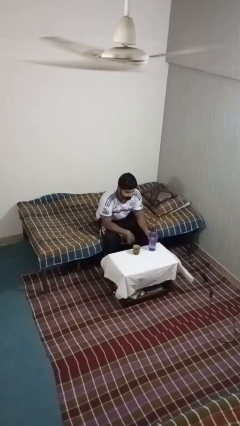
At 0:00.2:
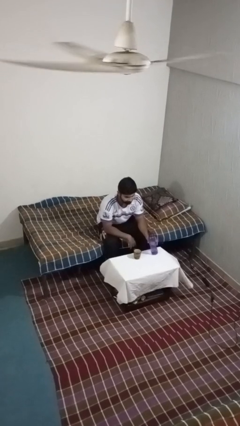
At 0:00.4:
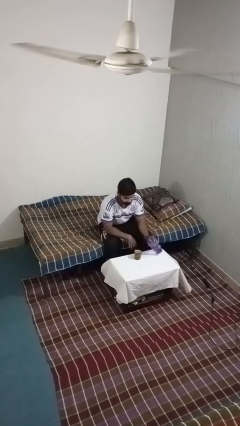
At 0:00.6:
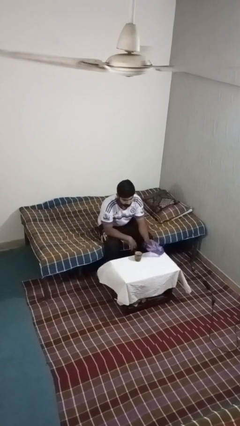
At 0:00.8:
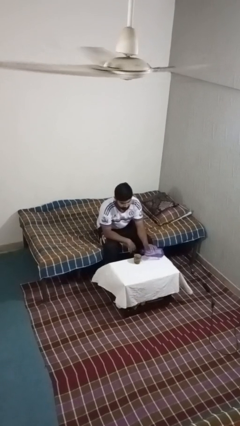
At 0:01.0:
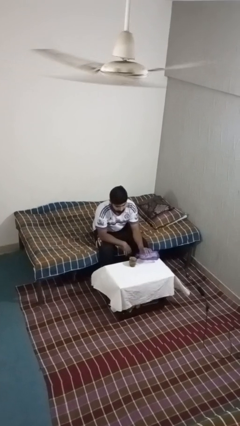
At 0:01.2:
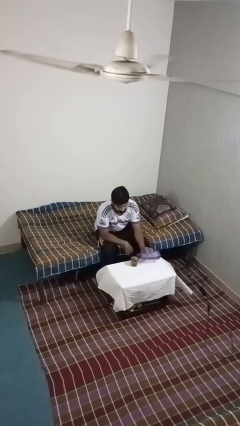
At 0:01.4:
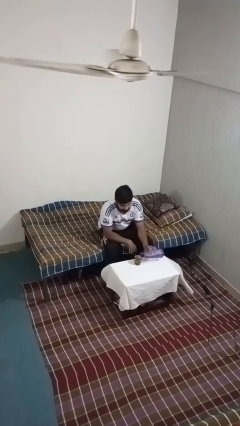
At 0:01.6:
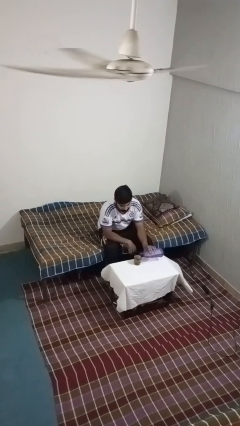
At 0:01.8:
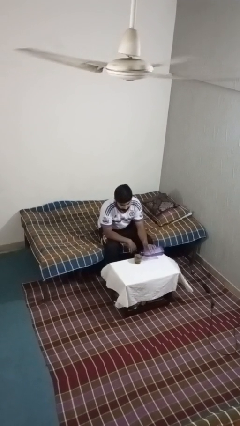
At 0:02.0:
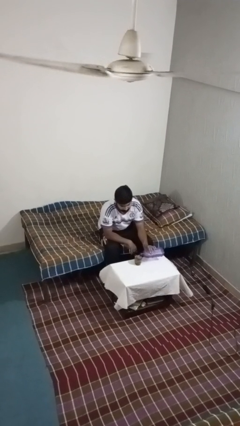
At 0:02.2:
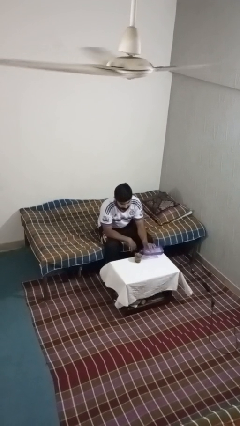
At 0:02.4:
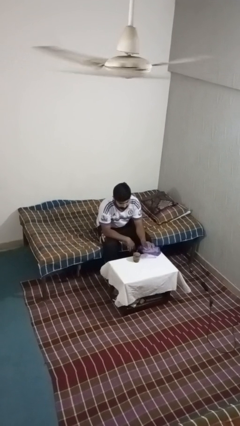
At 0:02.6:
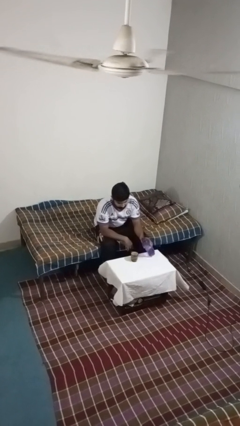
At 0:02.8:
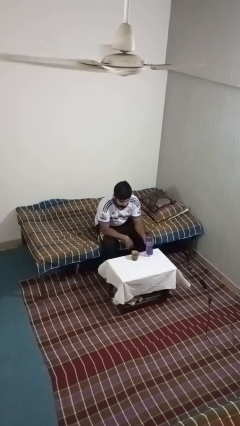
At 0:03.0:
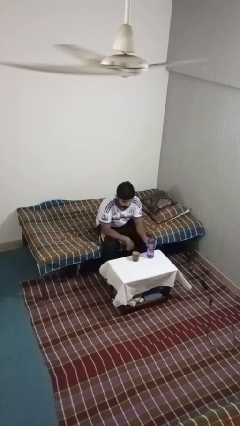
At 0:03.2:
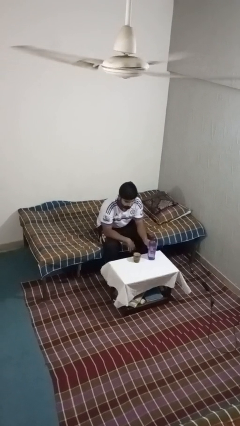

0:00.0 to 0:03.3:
person pours liquid into cup

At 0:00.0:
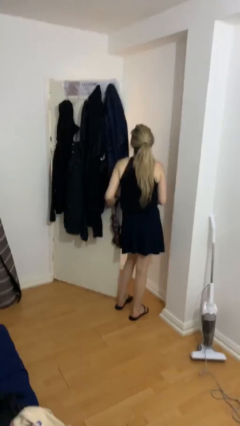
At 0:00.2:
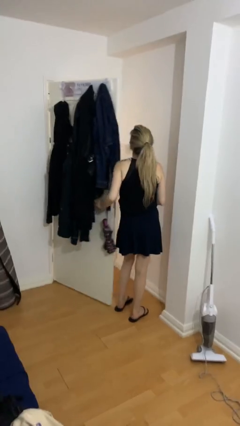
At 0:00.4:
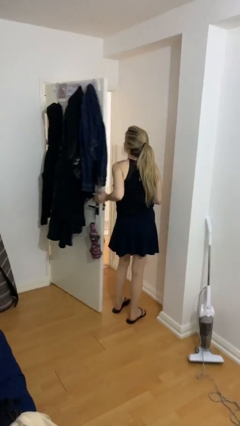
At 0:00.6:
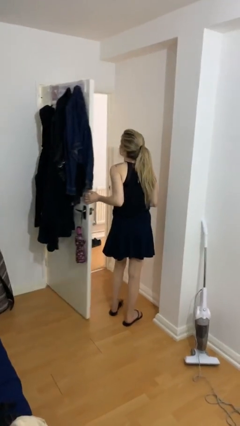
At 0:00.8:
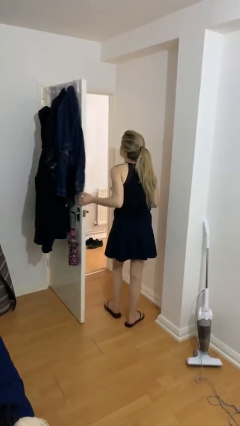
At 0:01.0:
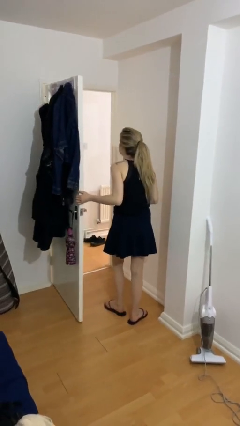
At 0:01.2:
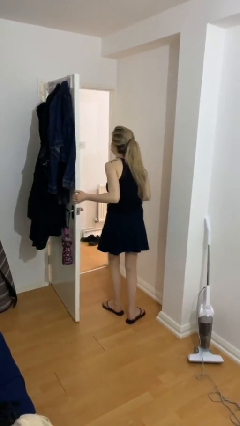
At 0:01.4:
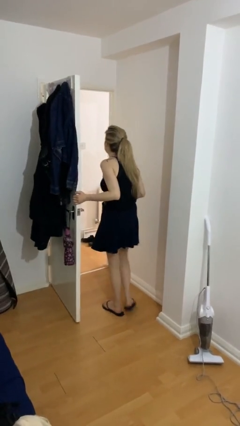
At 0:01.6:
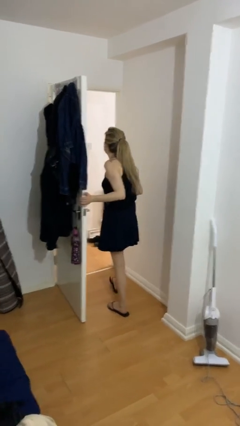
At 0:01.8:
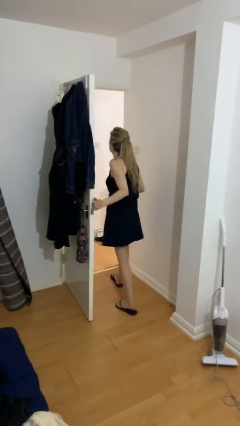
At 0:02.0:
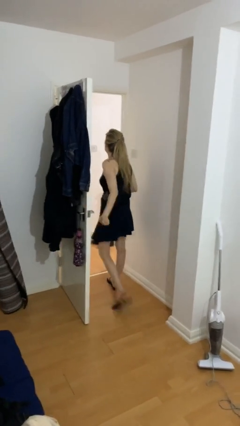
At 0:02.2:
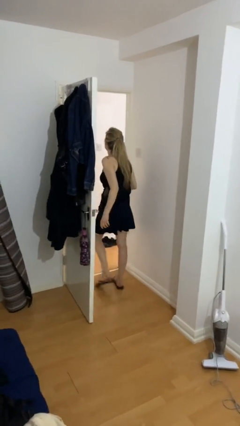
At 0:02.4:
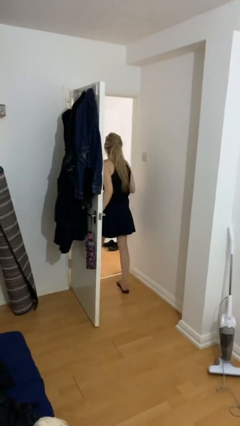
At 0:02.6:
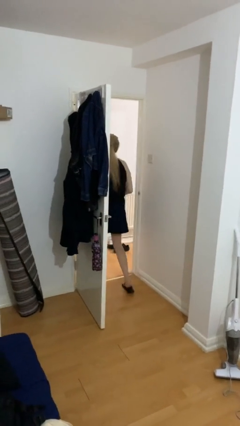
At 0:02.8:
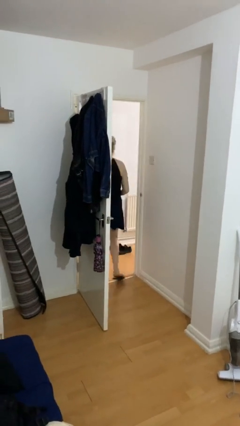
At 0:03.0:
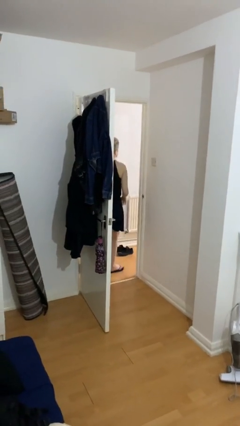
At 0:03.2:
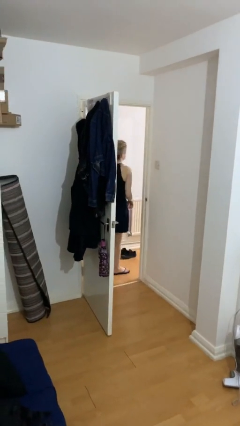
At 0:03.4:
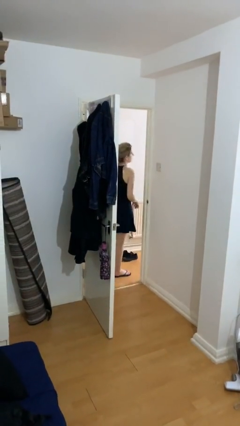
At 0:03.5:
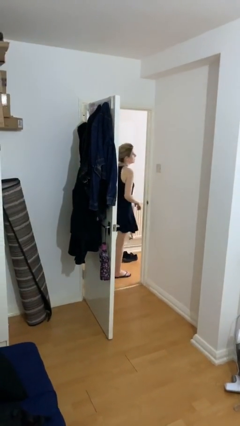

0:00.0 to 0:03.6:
person exits scene through structure

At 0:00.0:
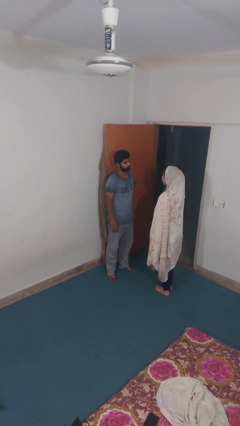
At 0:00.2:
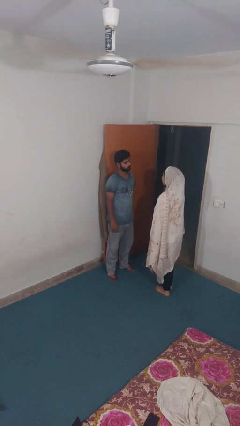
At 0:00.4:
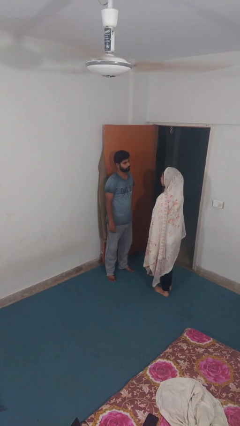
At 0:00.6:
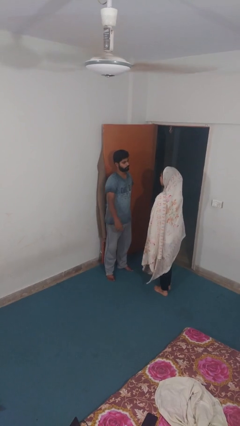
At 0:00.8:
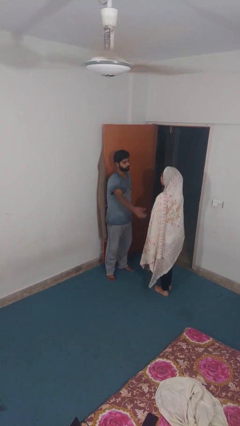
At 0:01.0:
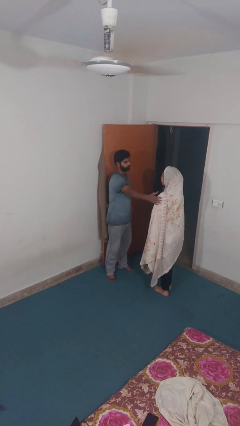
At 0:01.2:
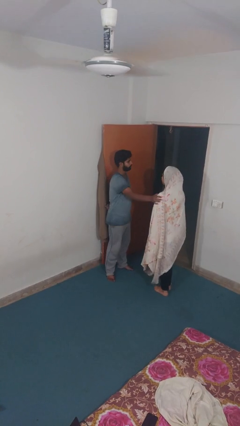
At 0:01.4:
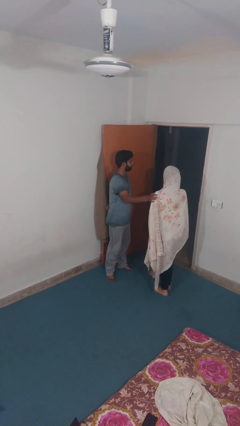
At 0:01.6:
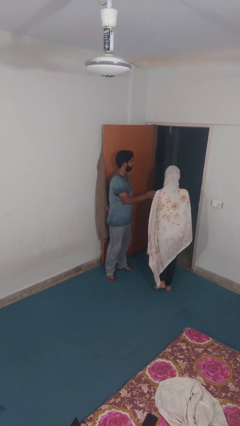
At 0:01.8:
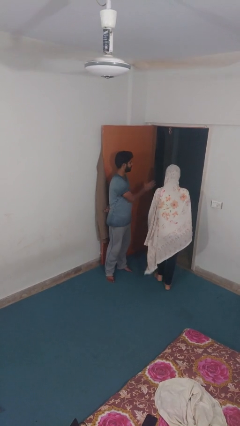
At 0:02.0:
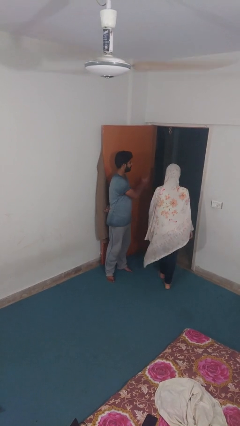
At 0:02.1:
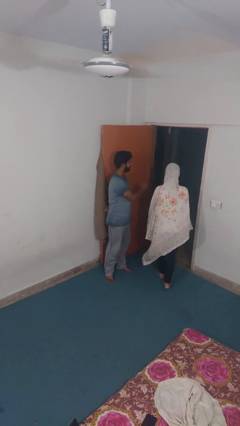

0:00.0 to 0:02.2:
person shoves person

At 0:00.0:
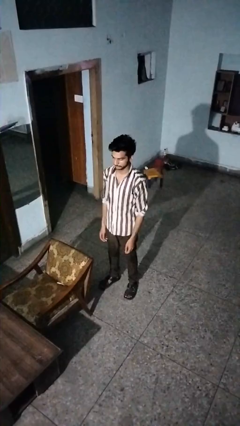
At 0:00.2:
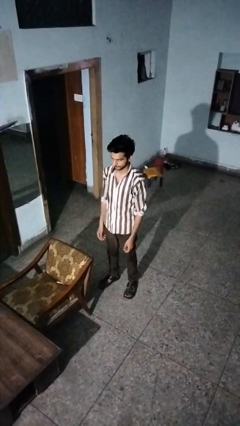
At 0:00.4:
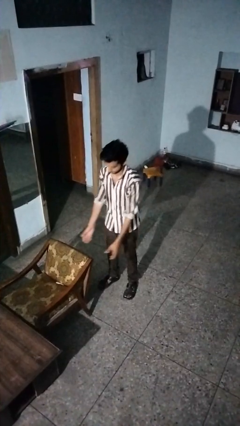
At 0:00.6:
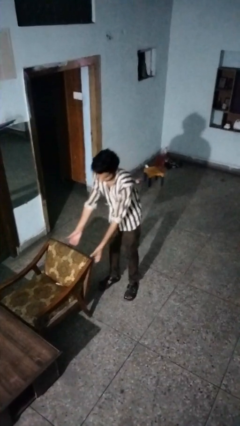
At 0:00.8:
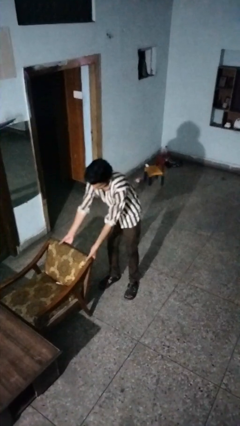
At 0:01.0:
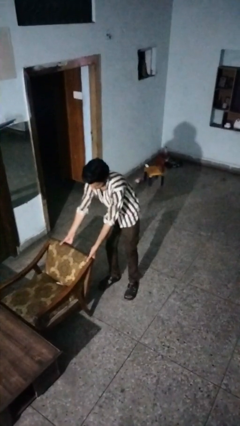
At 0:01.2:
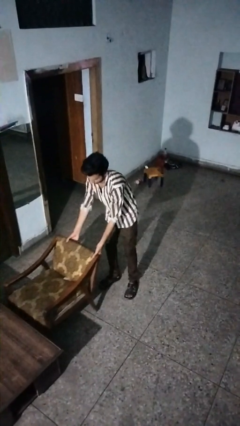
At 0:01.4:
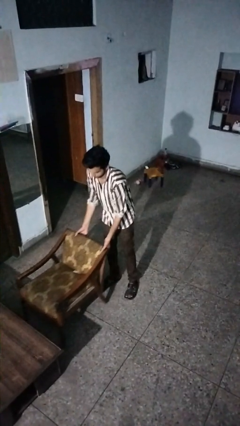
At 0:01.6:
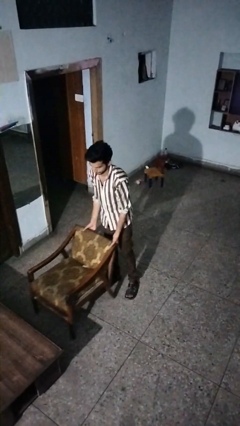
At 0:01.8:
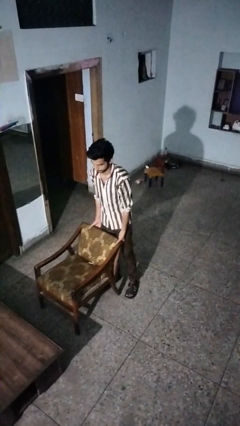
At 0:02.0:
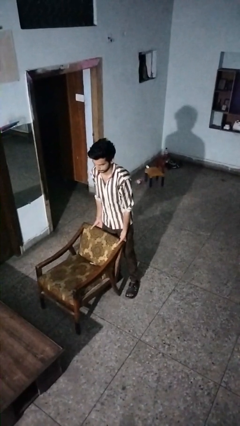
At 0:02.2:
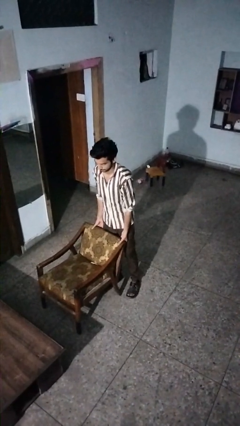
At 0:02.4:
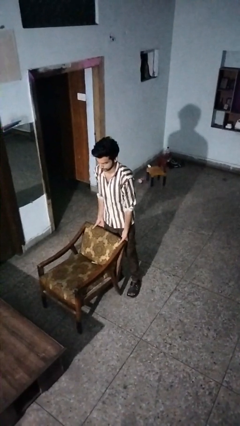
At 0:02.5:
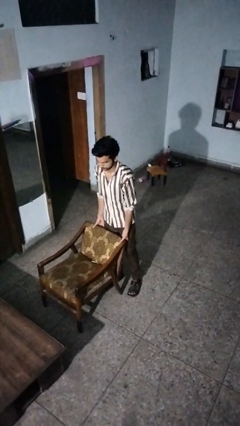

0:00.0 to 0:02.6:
person pulls out chair

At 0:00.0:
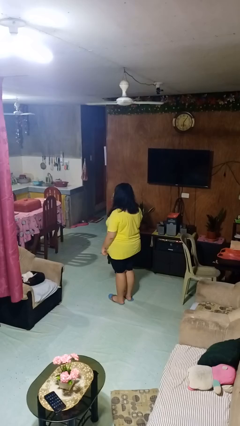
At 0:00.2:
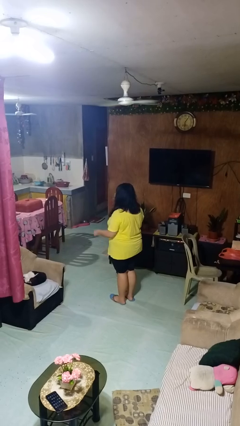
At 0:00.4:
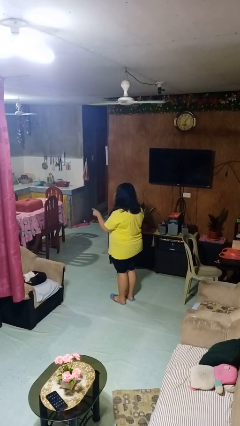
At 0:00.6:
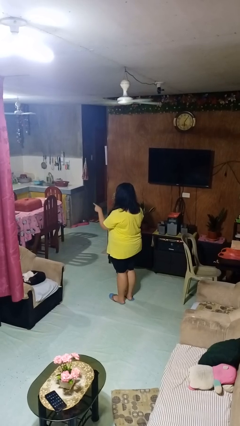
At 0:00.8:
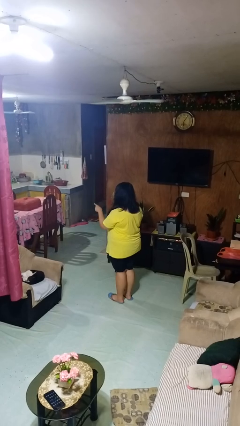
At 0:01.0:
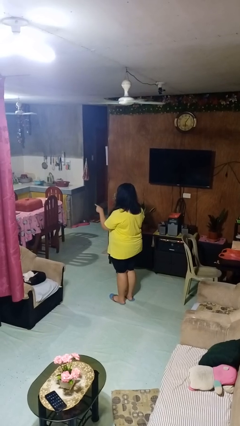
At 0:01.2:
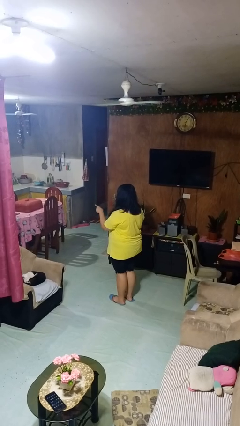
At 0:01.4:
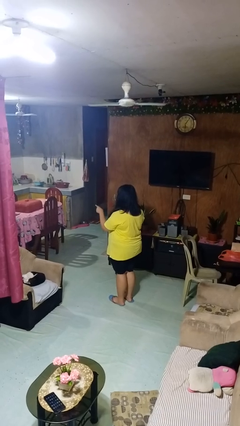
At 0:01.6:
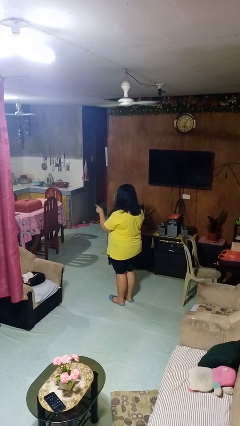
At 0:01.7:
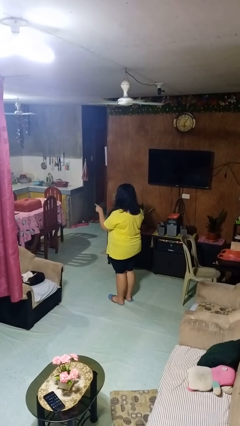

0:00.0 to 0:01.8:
person points at person

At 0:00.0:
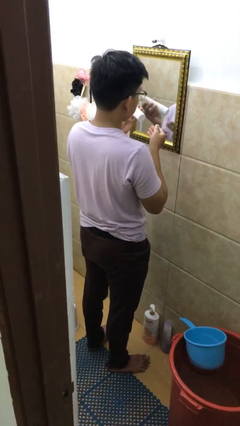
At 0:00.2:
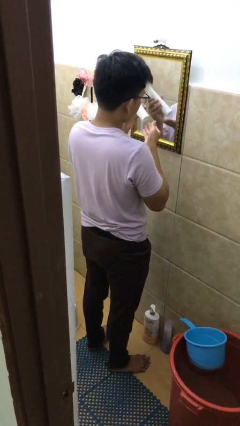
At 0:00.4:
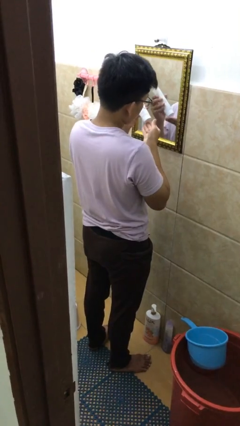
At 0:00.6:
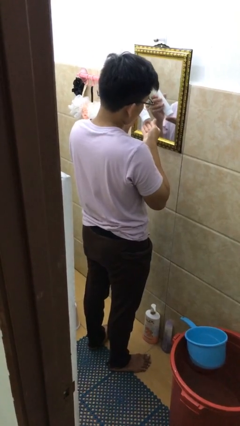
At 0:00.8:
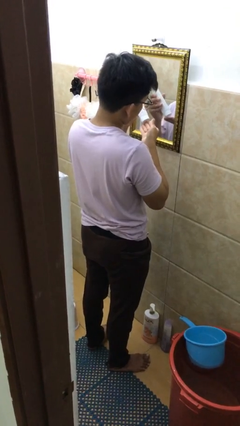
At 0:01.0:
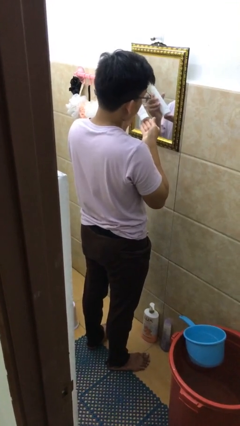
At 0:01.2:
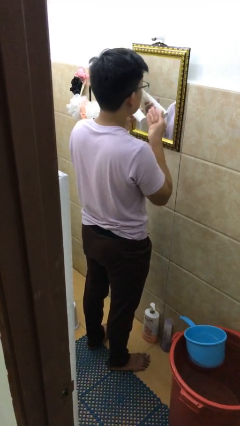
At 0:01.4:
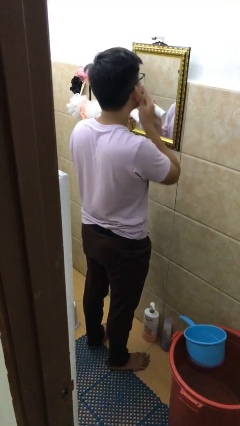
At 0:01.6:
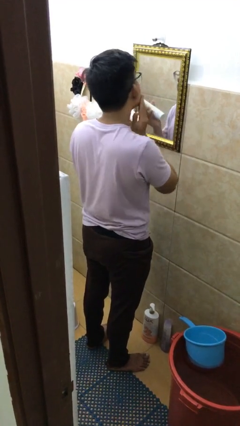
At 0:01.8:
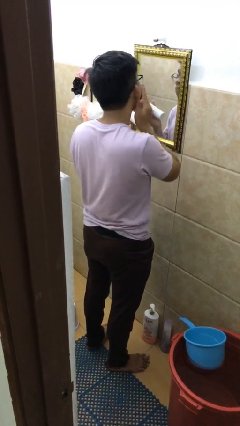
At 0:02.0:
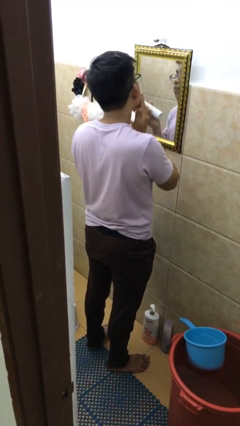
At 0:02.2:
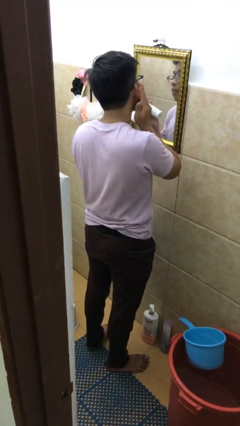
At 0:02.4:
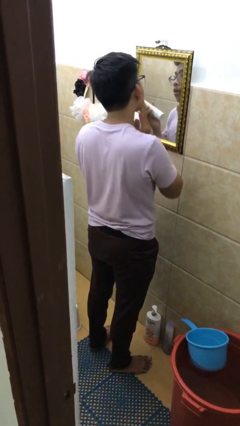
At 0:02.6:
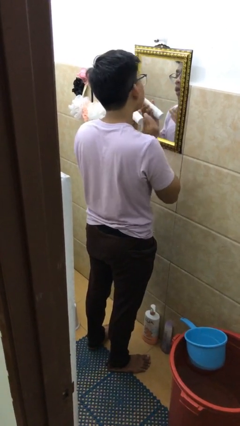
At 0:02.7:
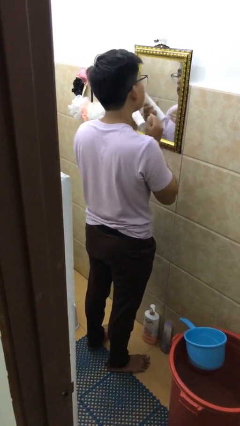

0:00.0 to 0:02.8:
person applies facial moisturizer

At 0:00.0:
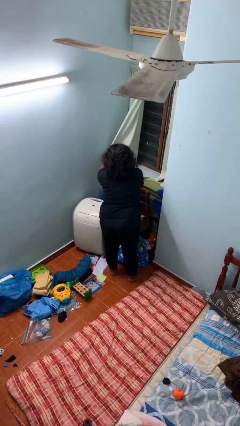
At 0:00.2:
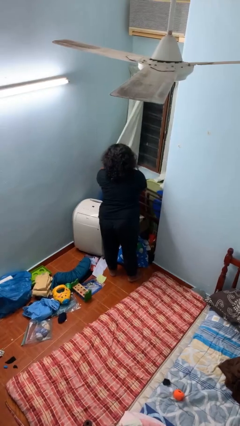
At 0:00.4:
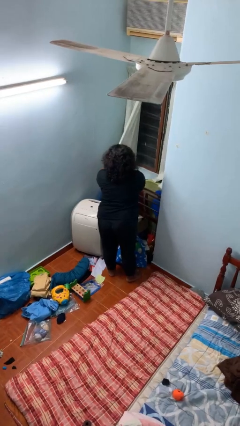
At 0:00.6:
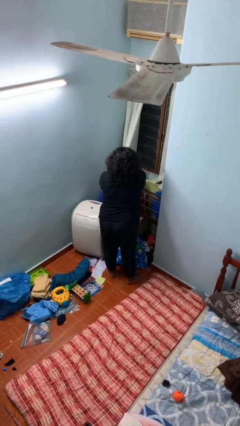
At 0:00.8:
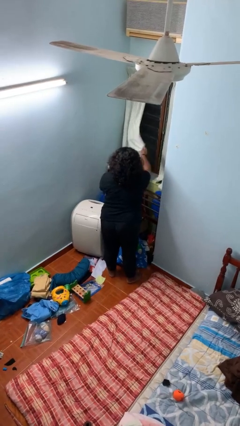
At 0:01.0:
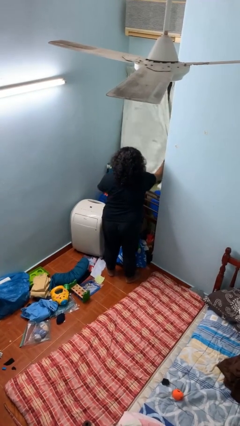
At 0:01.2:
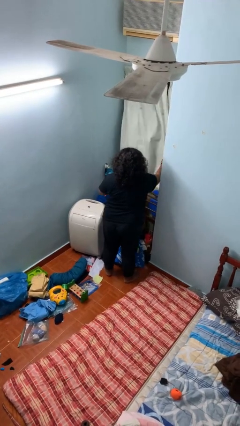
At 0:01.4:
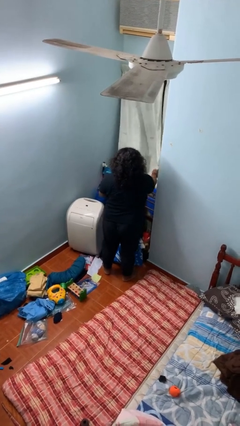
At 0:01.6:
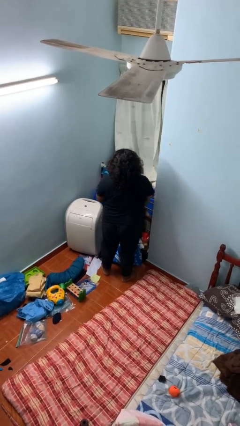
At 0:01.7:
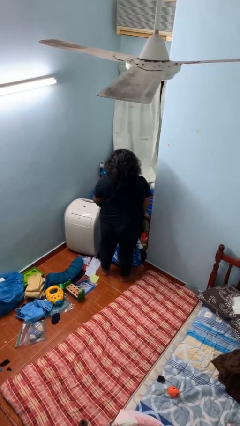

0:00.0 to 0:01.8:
person closes curtains
